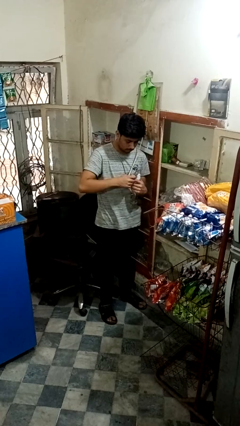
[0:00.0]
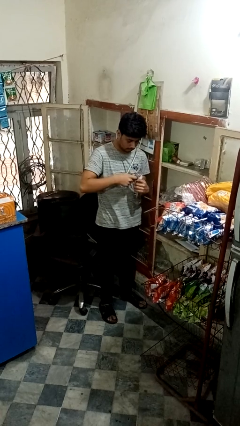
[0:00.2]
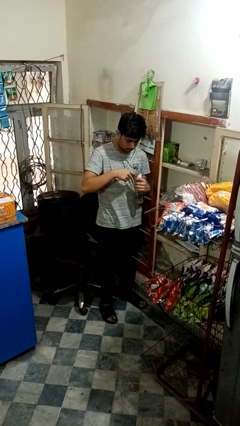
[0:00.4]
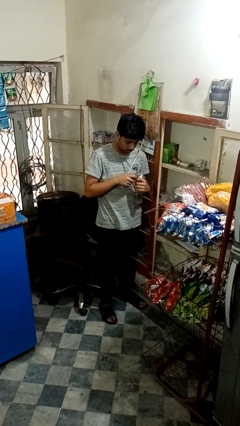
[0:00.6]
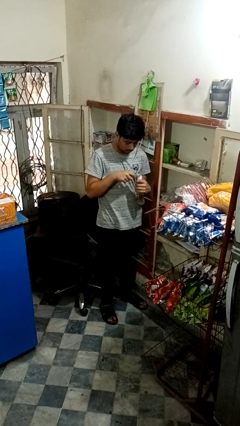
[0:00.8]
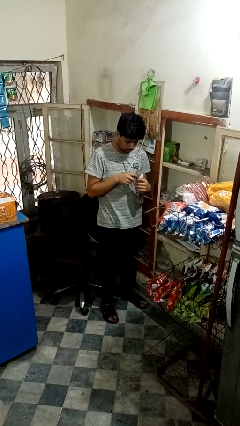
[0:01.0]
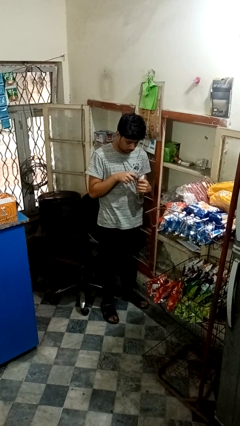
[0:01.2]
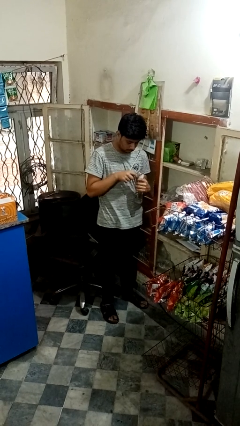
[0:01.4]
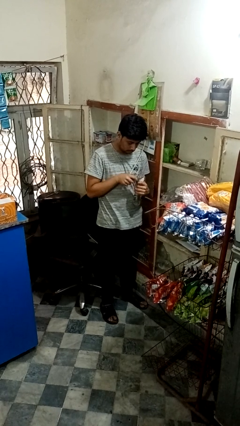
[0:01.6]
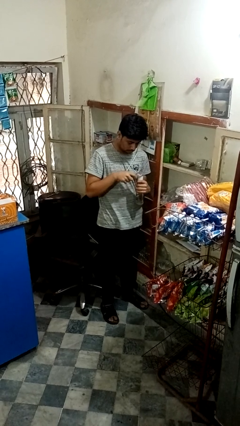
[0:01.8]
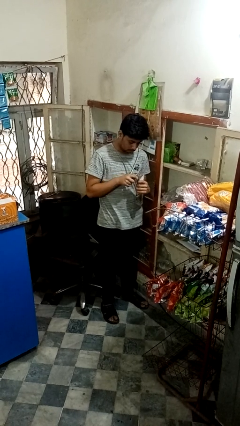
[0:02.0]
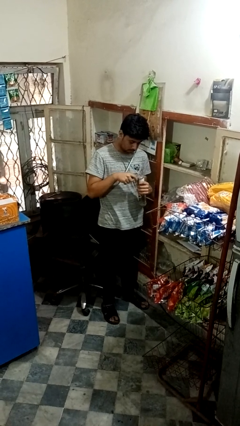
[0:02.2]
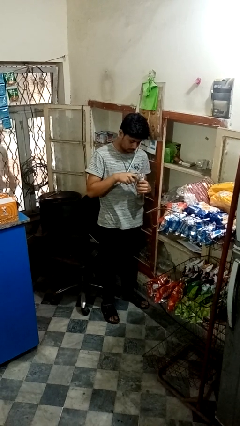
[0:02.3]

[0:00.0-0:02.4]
person opens can with can opener

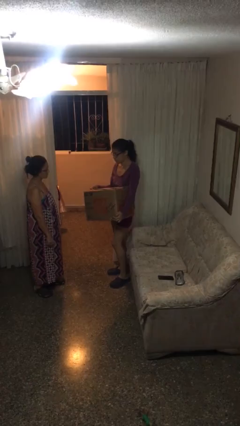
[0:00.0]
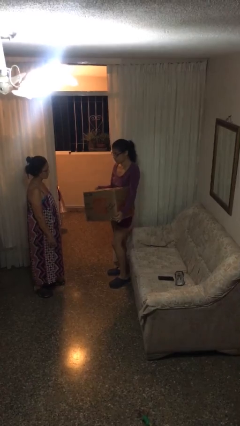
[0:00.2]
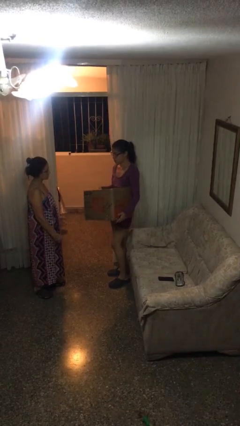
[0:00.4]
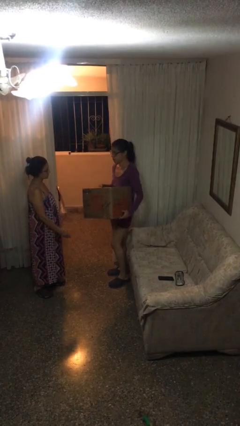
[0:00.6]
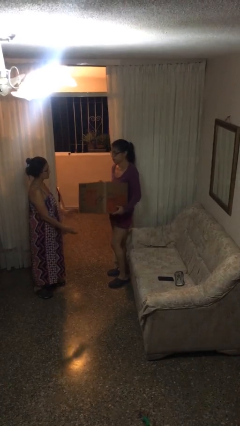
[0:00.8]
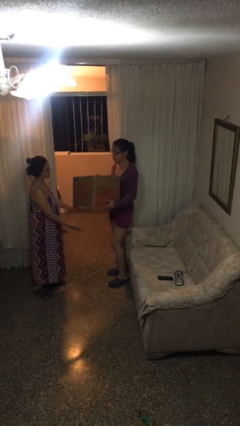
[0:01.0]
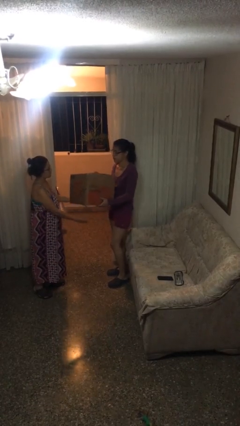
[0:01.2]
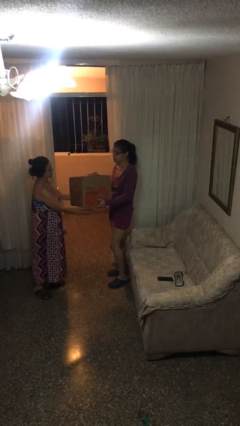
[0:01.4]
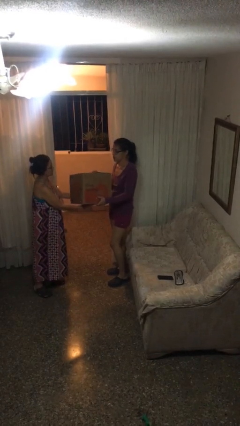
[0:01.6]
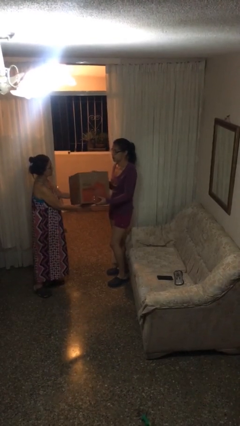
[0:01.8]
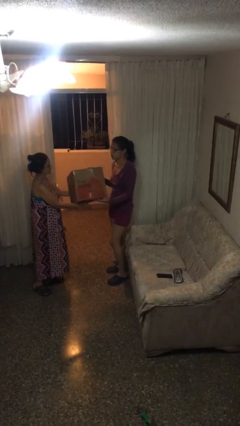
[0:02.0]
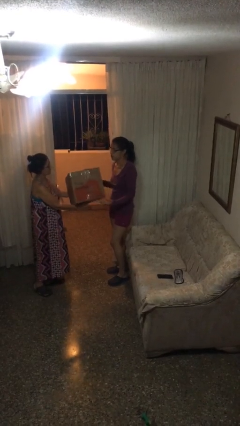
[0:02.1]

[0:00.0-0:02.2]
person transfers object to person

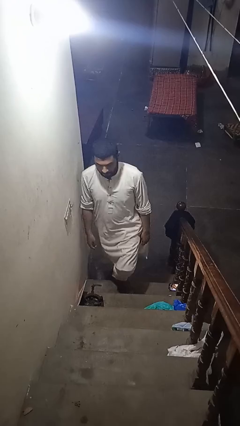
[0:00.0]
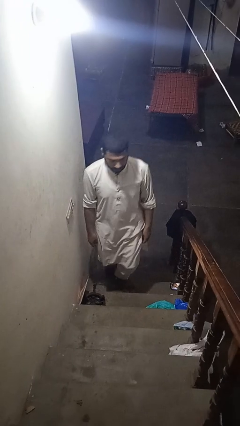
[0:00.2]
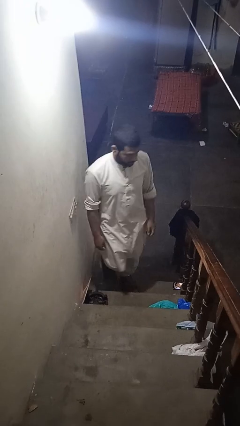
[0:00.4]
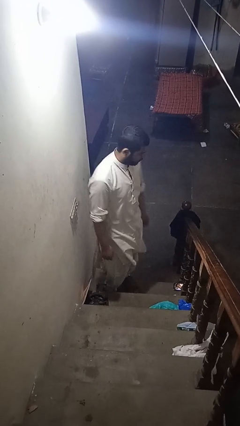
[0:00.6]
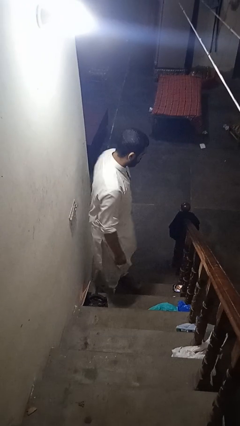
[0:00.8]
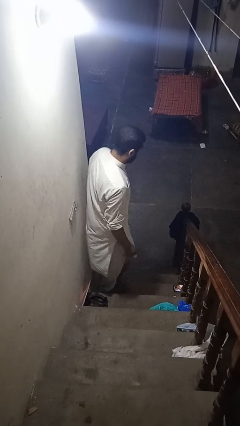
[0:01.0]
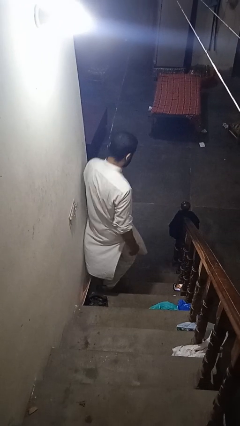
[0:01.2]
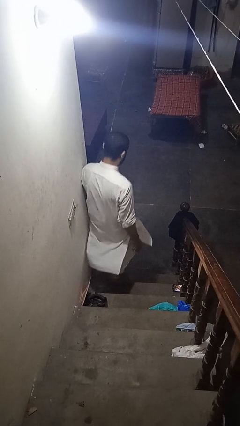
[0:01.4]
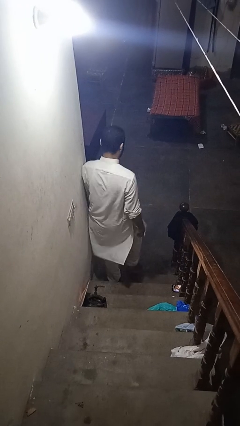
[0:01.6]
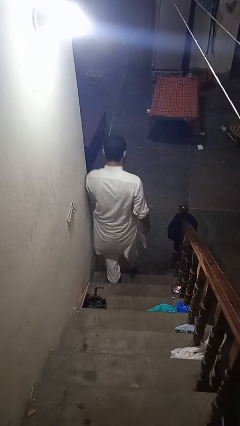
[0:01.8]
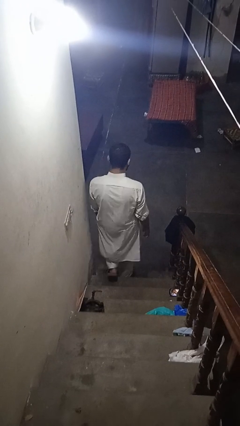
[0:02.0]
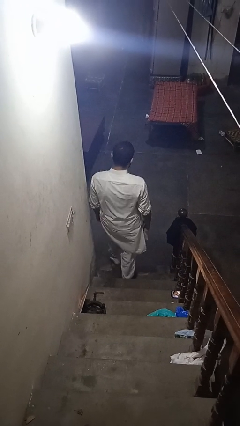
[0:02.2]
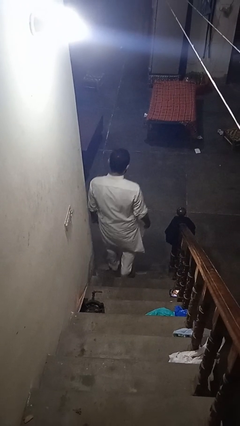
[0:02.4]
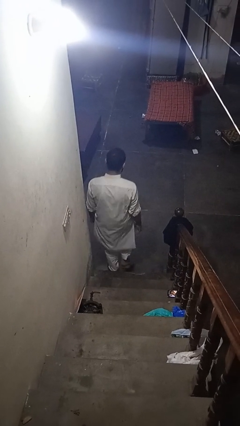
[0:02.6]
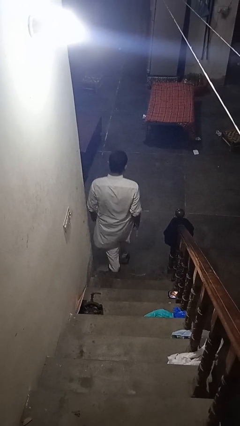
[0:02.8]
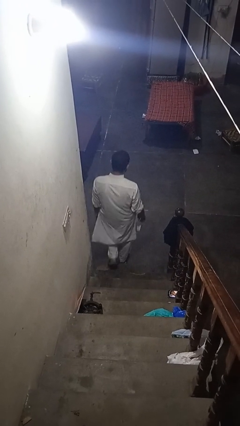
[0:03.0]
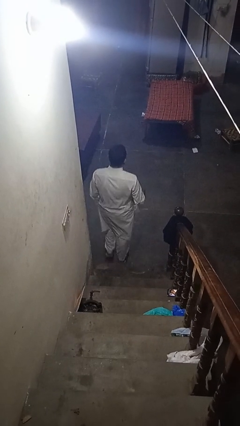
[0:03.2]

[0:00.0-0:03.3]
person climbs down stairs

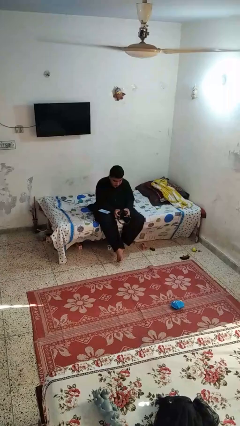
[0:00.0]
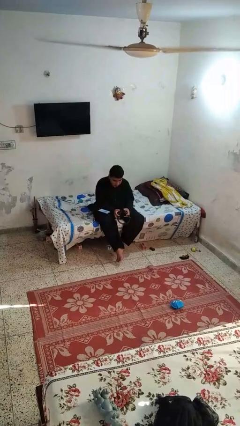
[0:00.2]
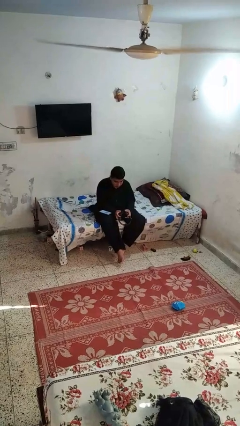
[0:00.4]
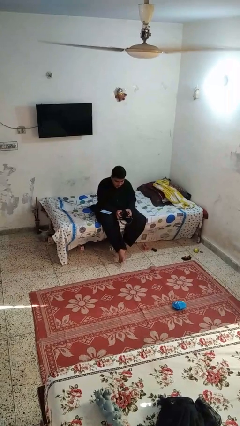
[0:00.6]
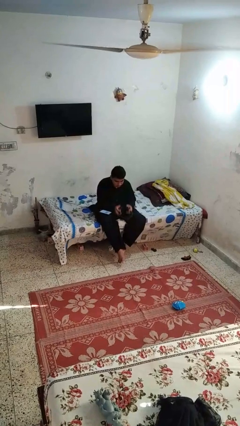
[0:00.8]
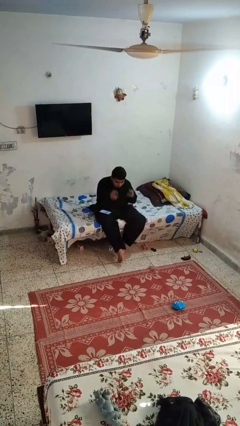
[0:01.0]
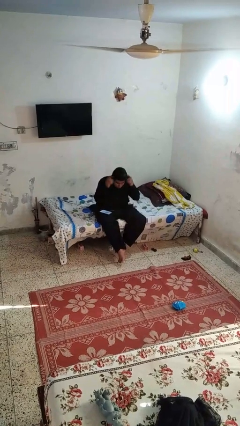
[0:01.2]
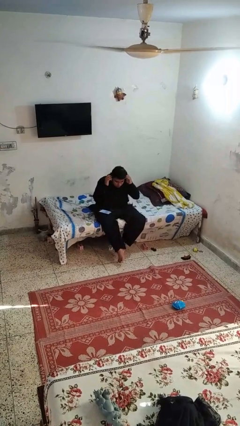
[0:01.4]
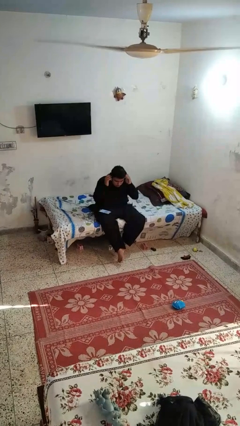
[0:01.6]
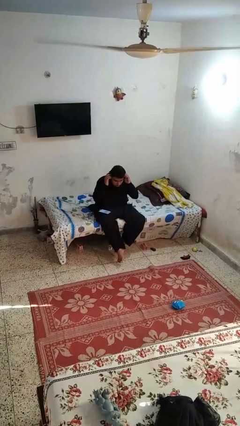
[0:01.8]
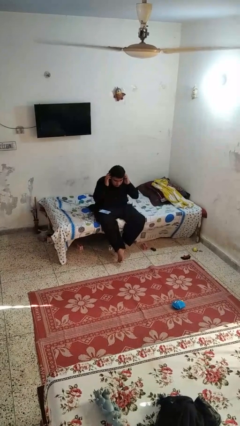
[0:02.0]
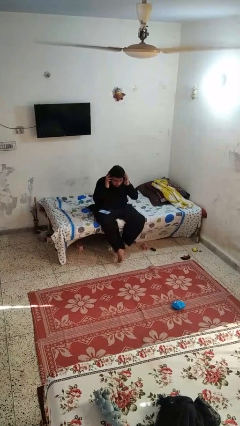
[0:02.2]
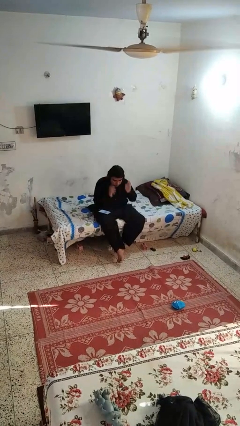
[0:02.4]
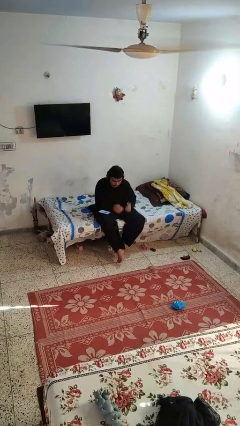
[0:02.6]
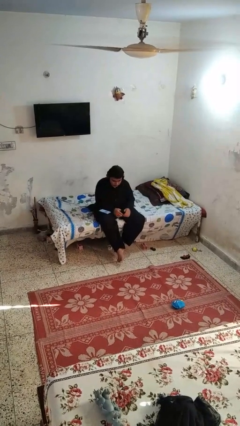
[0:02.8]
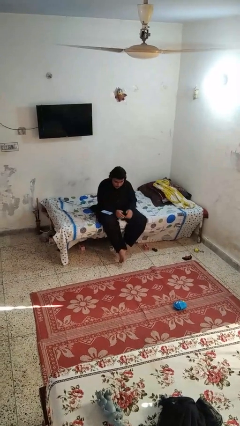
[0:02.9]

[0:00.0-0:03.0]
person puts on headphones

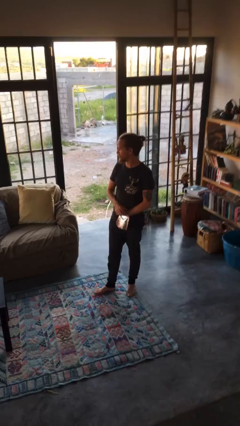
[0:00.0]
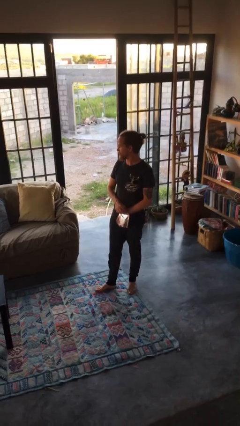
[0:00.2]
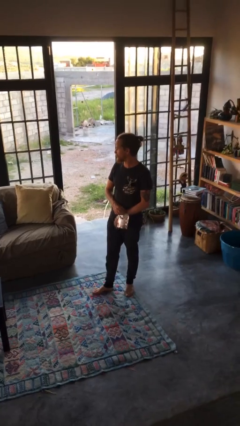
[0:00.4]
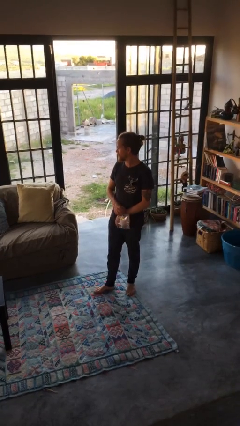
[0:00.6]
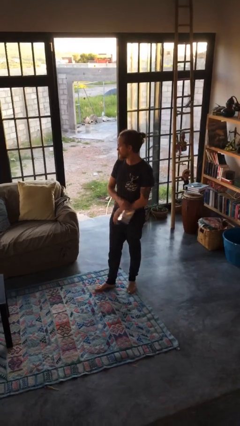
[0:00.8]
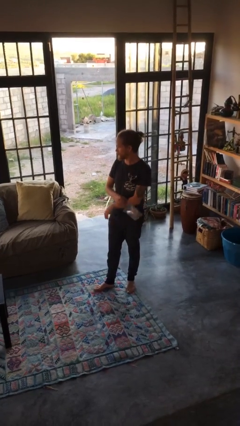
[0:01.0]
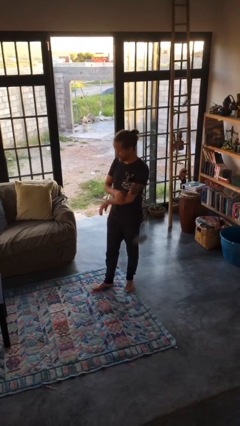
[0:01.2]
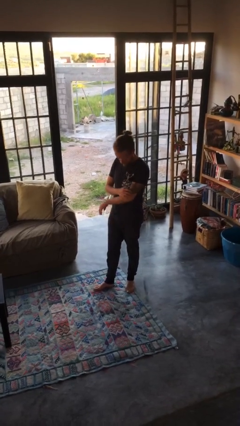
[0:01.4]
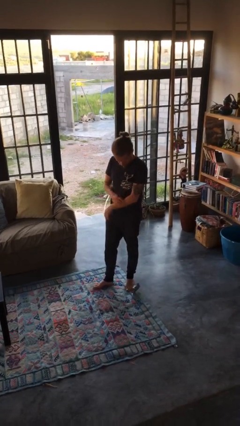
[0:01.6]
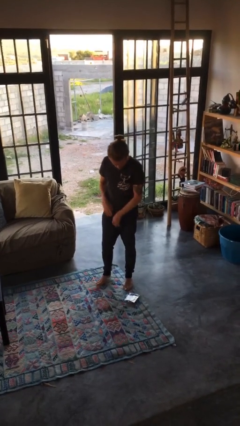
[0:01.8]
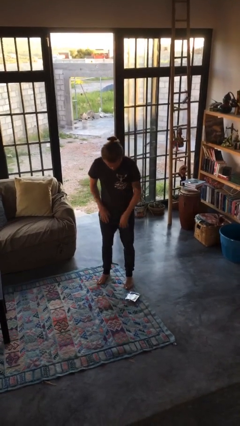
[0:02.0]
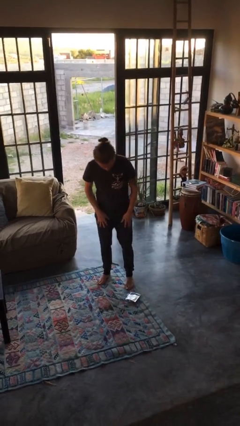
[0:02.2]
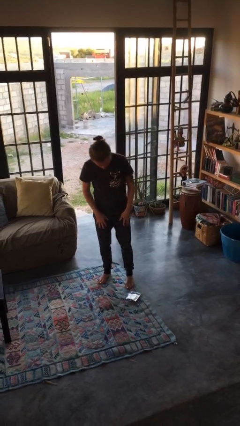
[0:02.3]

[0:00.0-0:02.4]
person drops object

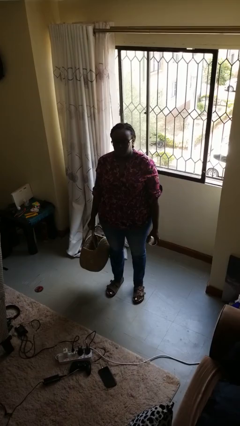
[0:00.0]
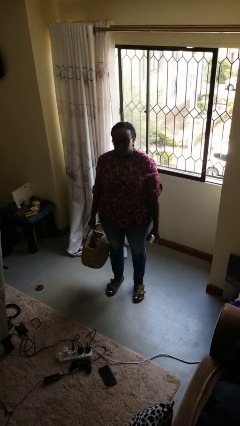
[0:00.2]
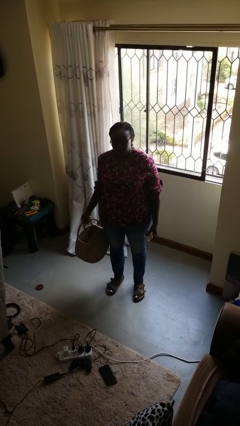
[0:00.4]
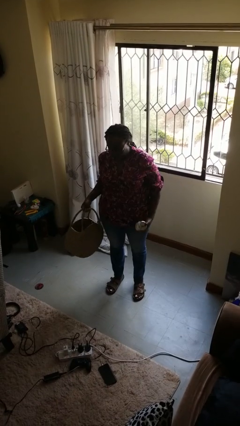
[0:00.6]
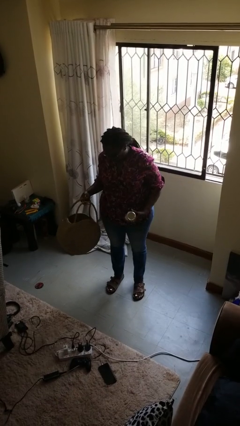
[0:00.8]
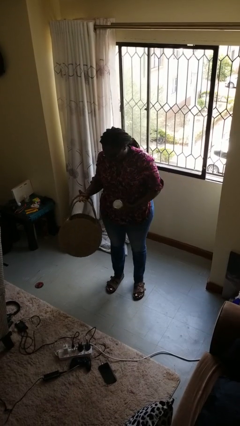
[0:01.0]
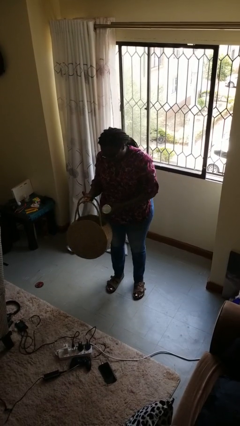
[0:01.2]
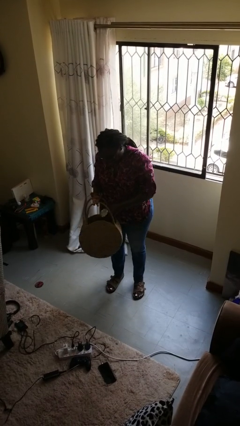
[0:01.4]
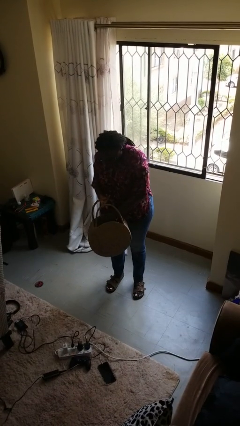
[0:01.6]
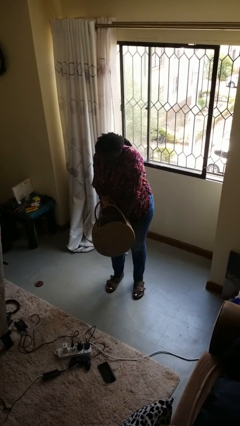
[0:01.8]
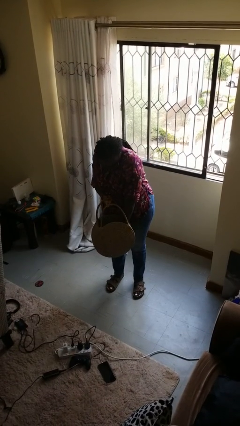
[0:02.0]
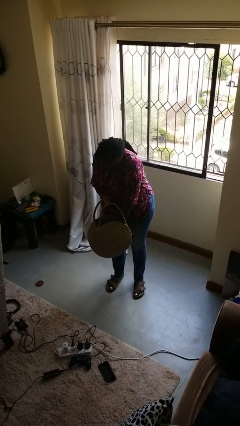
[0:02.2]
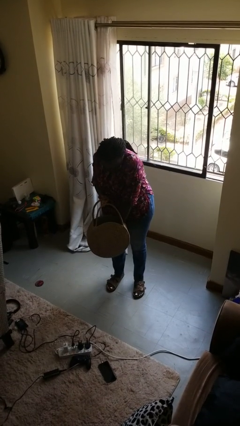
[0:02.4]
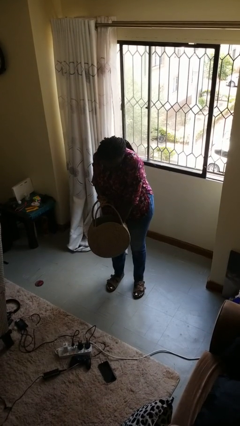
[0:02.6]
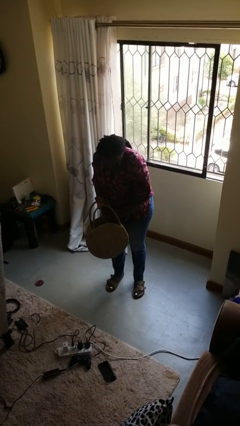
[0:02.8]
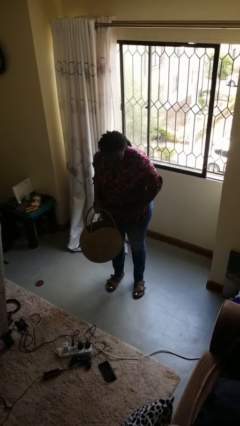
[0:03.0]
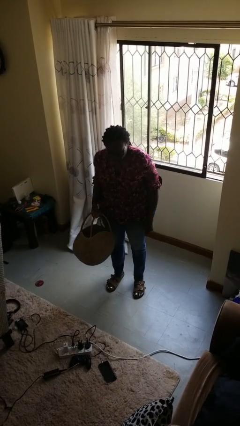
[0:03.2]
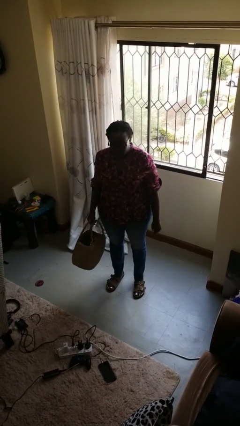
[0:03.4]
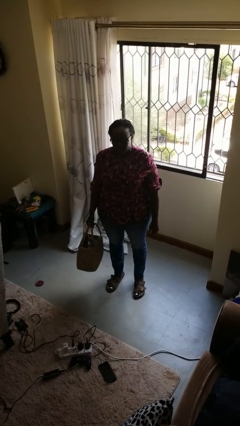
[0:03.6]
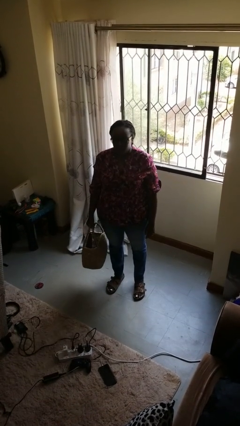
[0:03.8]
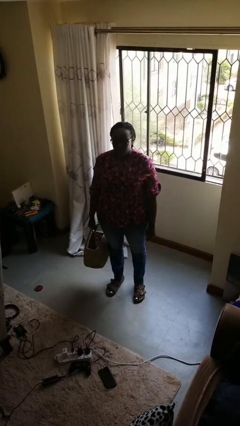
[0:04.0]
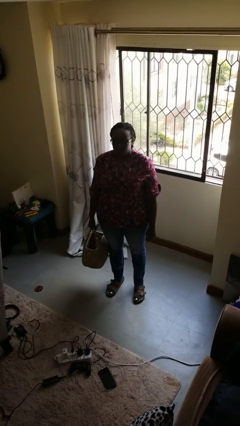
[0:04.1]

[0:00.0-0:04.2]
person puts object into basket
